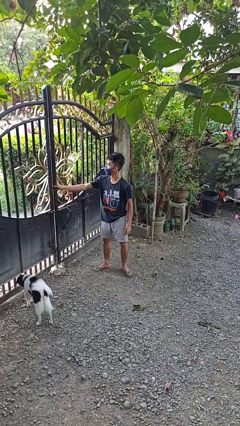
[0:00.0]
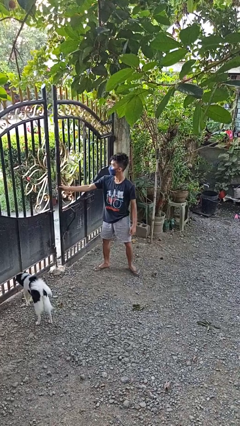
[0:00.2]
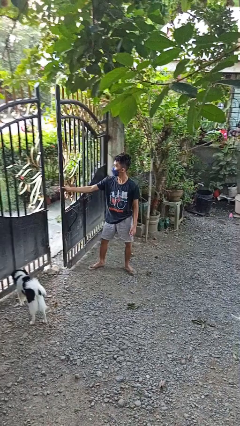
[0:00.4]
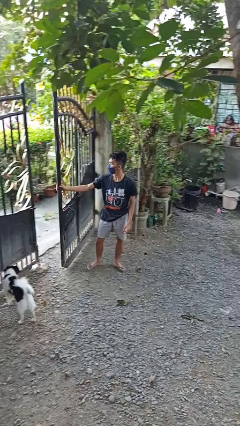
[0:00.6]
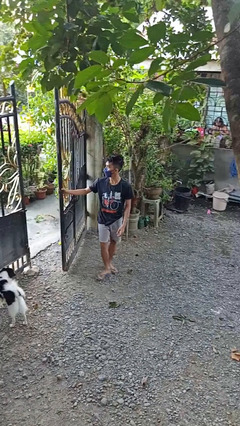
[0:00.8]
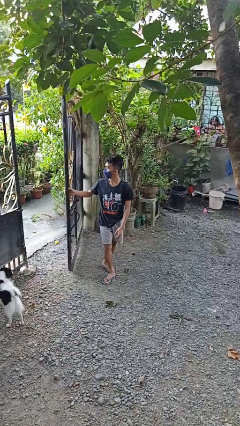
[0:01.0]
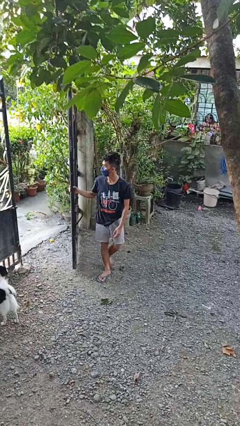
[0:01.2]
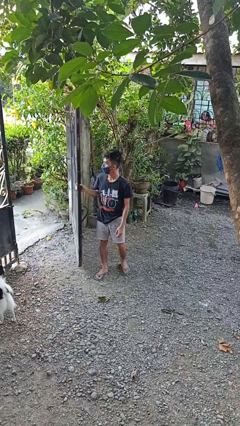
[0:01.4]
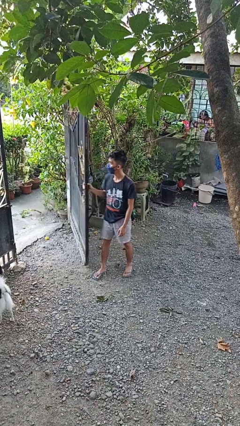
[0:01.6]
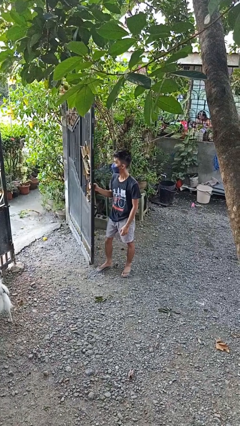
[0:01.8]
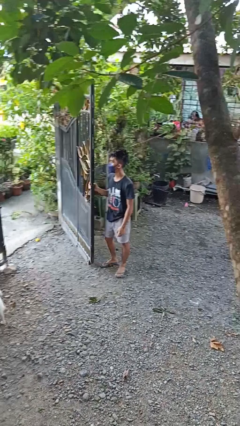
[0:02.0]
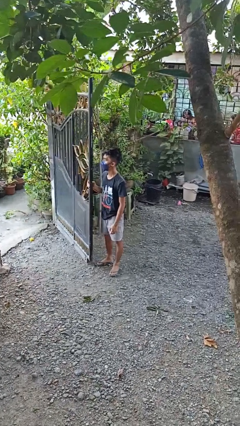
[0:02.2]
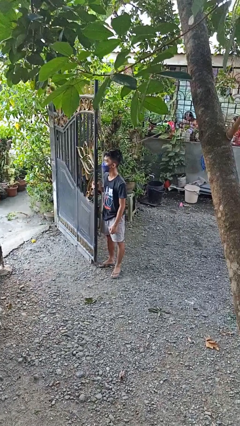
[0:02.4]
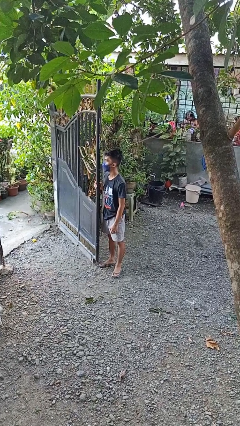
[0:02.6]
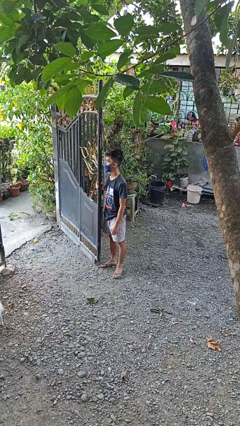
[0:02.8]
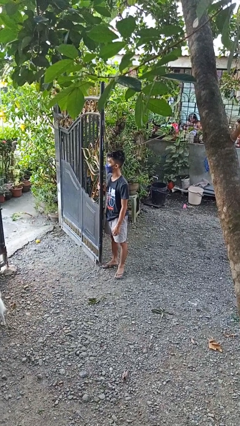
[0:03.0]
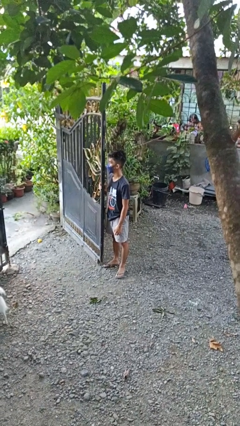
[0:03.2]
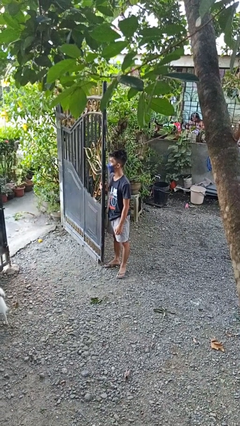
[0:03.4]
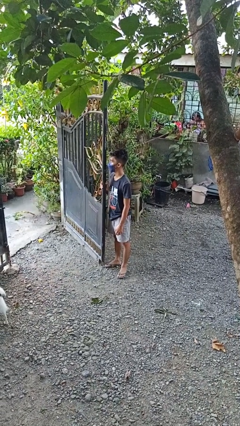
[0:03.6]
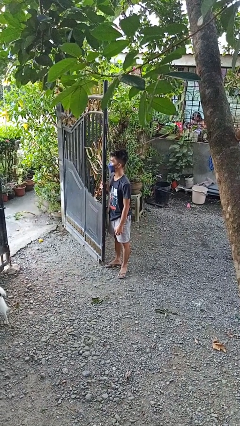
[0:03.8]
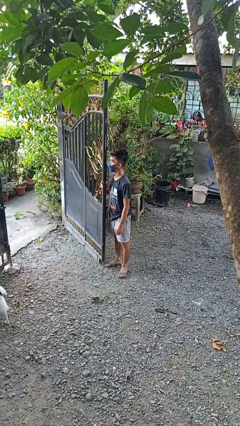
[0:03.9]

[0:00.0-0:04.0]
person opens gate

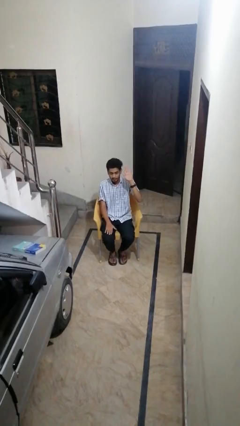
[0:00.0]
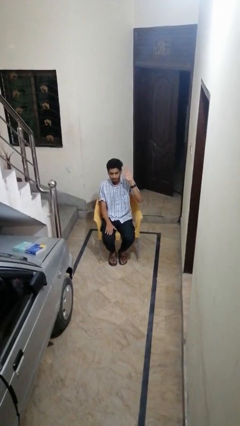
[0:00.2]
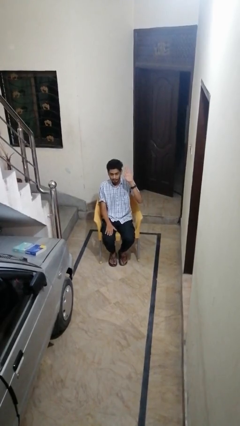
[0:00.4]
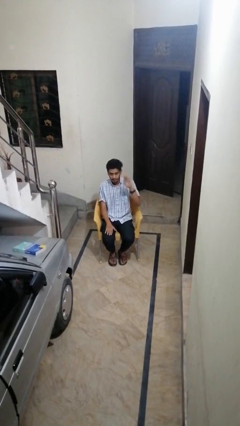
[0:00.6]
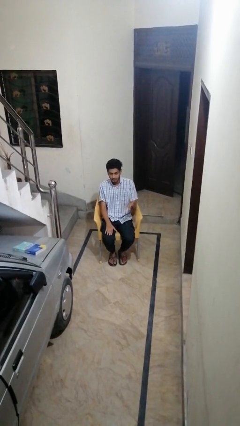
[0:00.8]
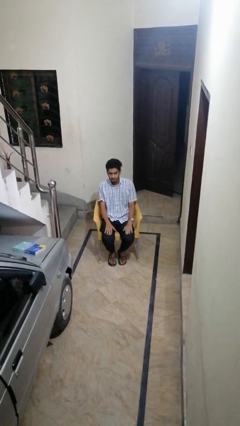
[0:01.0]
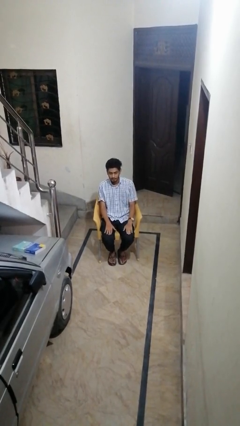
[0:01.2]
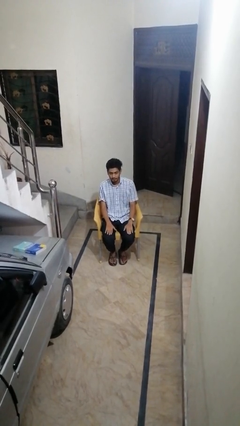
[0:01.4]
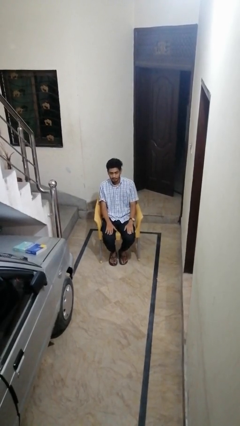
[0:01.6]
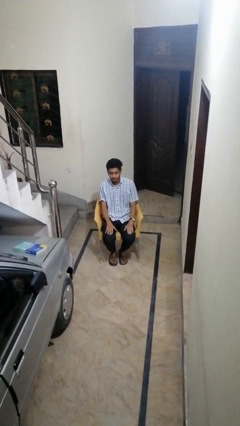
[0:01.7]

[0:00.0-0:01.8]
person gestures lower hand

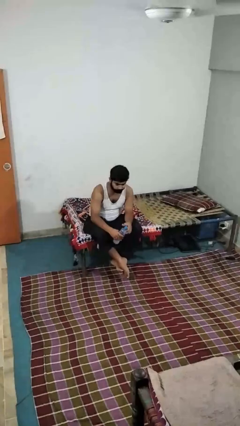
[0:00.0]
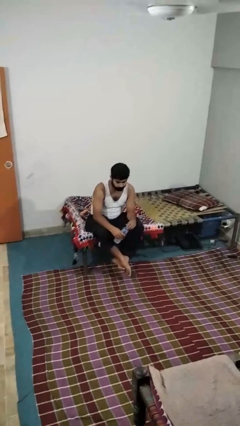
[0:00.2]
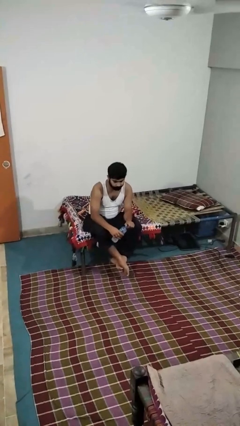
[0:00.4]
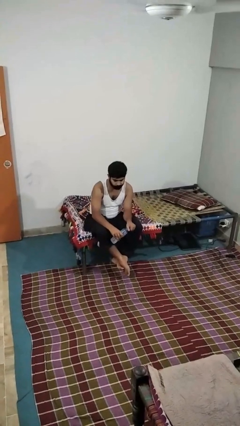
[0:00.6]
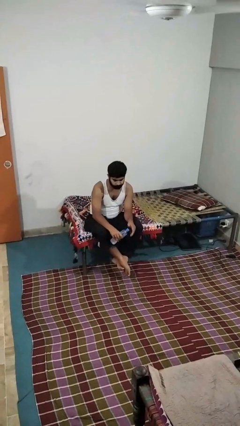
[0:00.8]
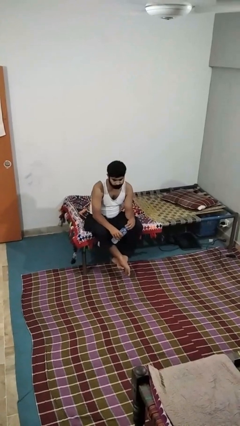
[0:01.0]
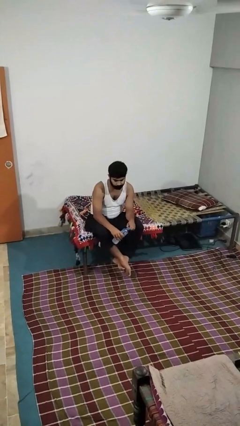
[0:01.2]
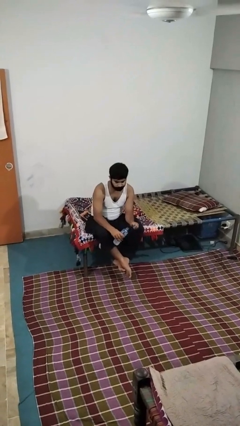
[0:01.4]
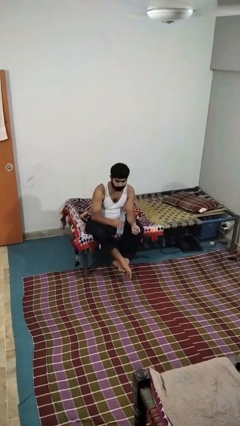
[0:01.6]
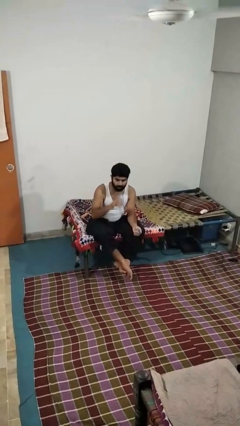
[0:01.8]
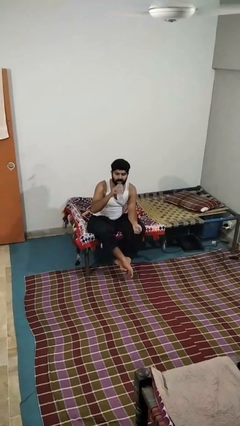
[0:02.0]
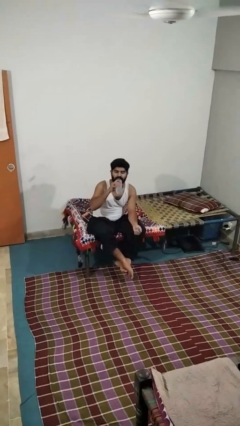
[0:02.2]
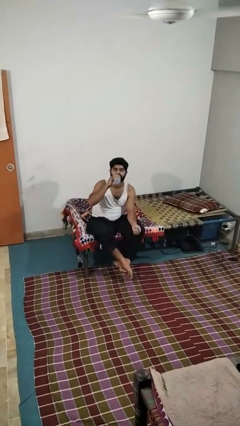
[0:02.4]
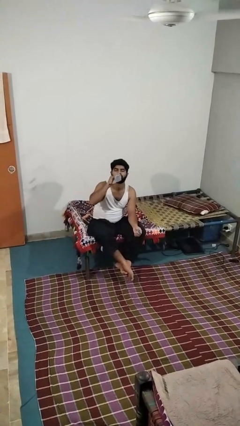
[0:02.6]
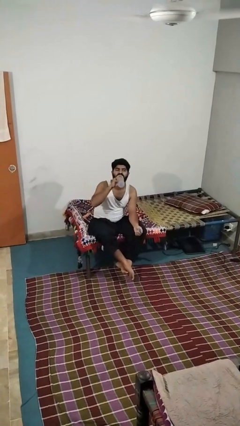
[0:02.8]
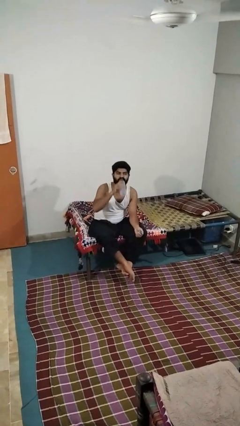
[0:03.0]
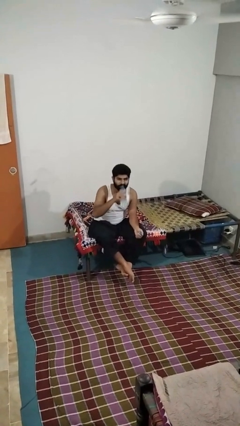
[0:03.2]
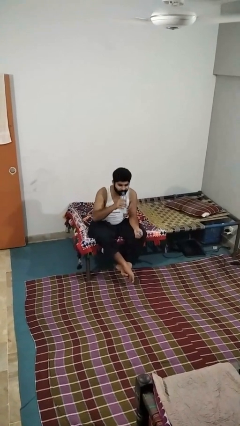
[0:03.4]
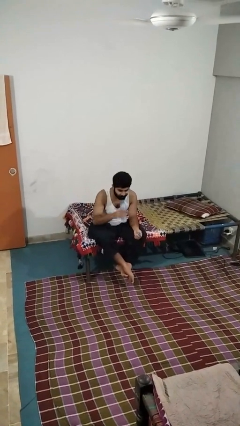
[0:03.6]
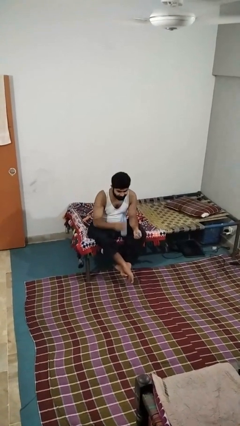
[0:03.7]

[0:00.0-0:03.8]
person drinks from bottle

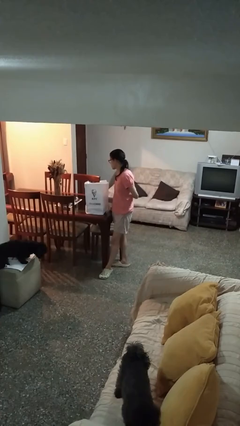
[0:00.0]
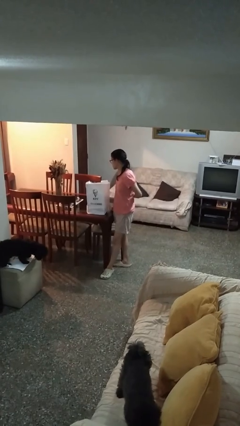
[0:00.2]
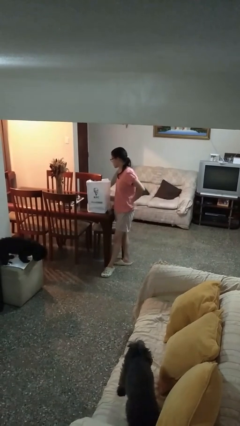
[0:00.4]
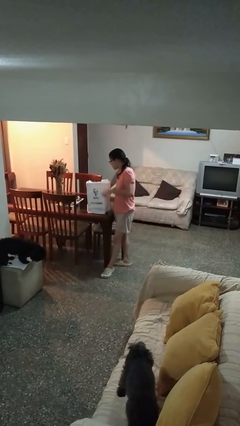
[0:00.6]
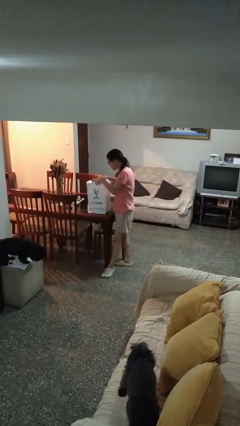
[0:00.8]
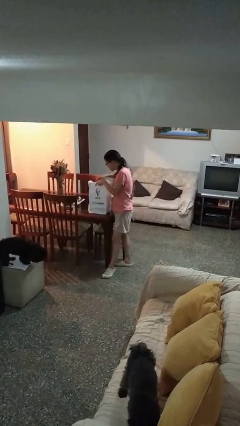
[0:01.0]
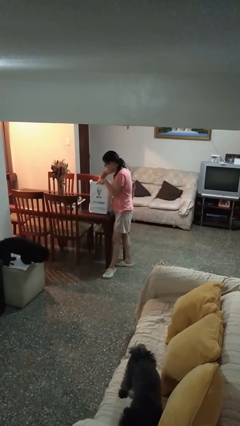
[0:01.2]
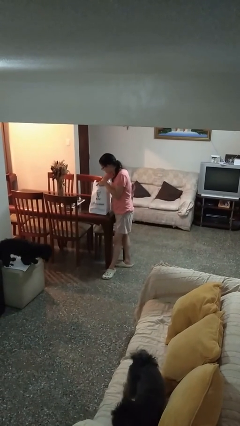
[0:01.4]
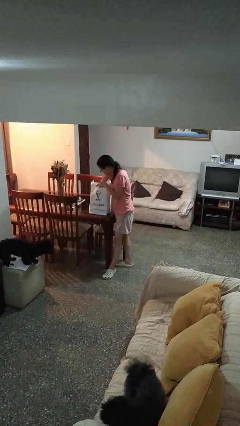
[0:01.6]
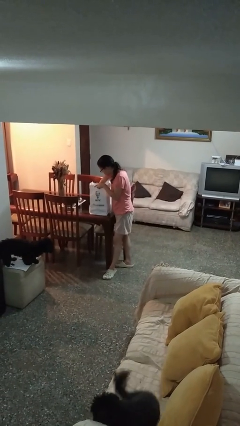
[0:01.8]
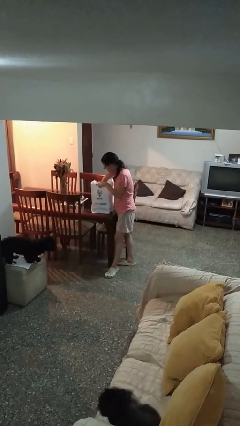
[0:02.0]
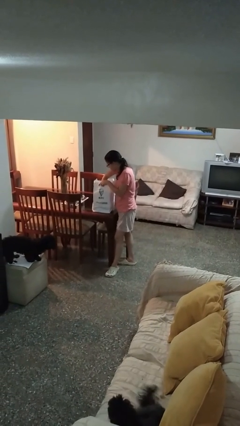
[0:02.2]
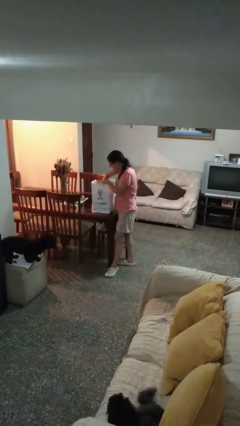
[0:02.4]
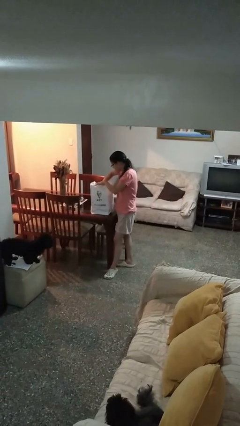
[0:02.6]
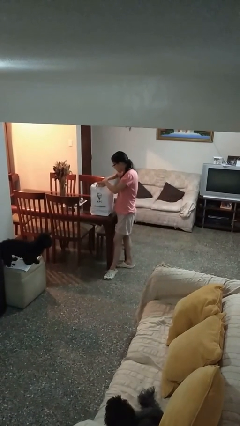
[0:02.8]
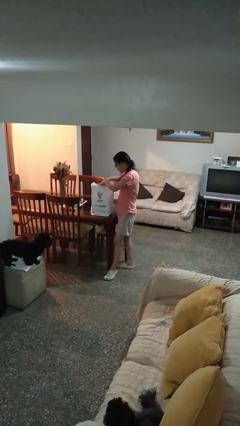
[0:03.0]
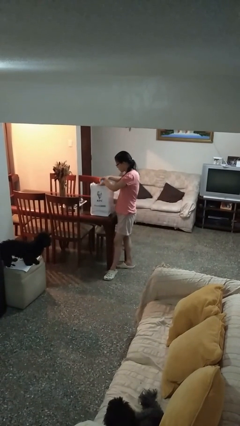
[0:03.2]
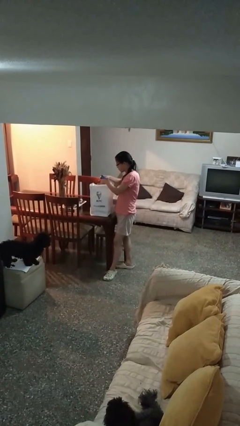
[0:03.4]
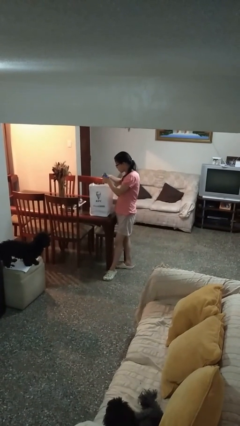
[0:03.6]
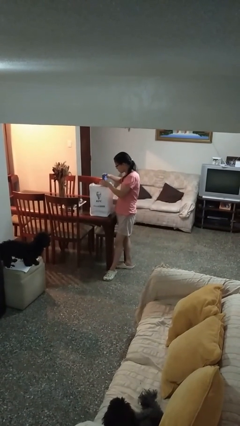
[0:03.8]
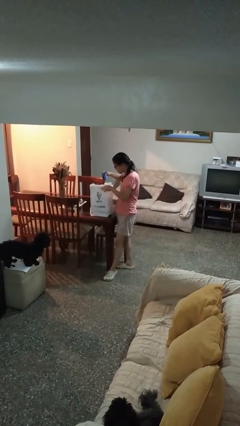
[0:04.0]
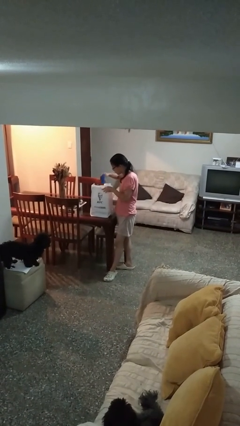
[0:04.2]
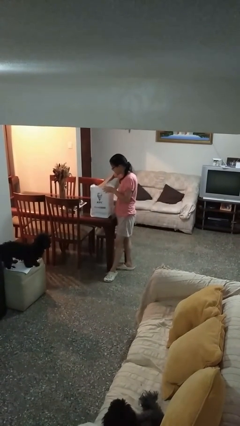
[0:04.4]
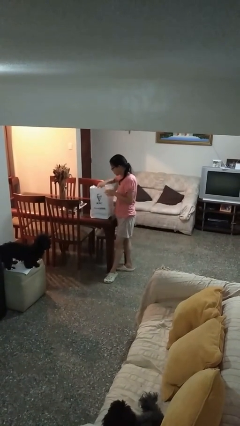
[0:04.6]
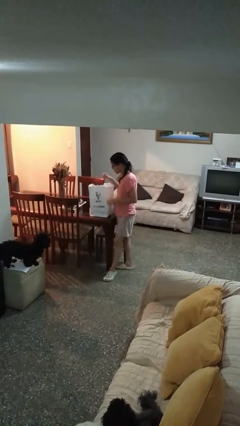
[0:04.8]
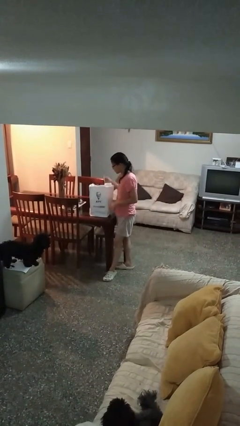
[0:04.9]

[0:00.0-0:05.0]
person searches in bag

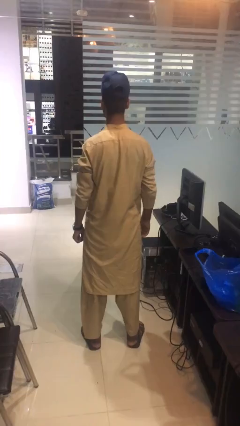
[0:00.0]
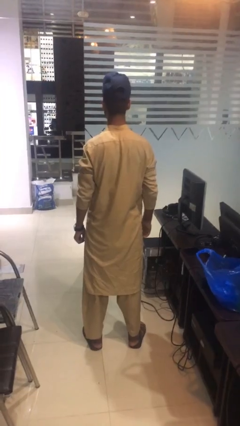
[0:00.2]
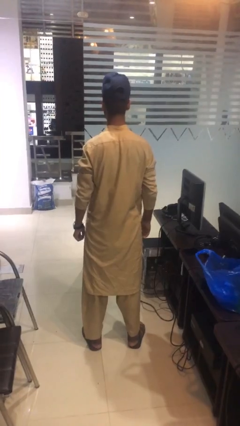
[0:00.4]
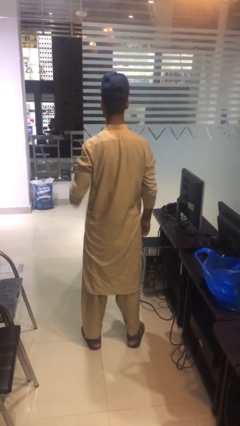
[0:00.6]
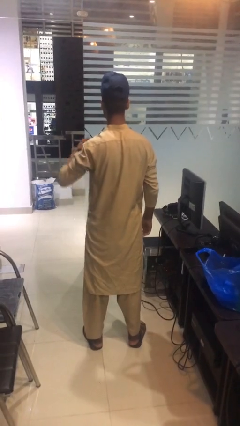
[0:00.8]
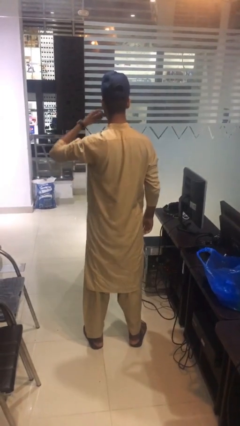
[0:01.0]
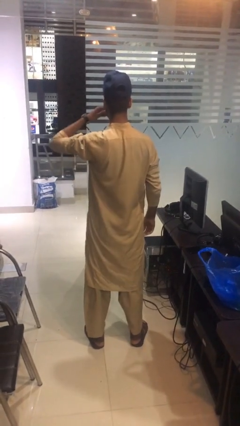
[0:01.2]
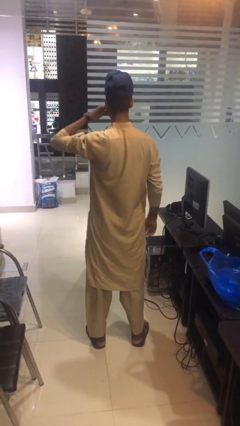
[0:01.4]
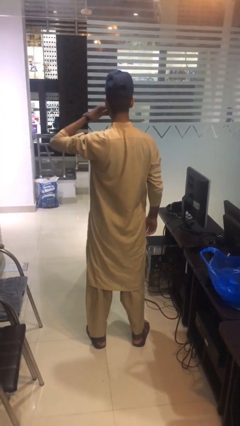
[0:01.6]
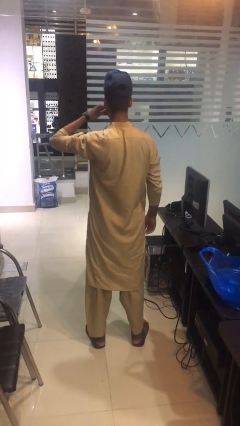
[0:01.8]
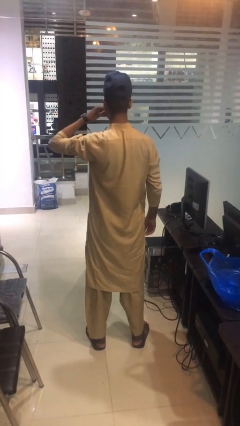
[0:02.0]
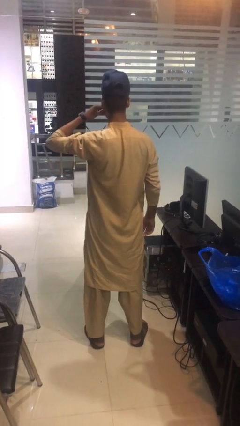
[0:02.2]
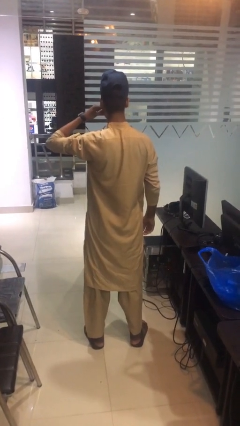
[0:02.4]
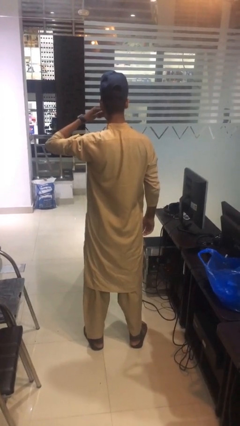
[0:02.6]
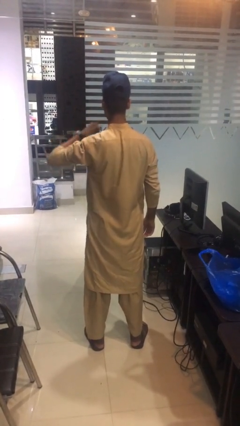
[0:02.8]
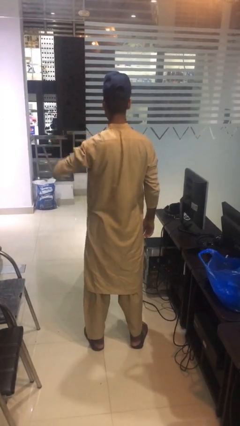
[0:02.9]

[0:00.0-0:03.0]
person scratches face
